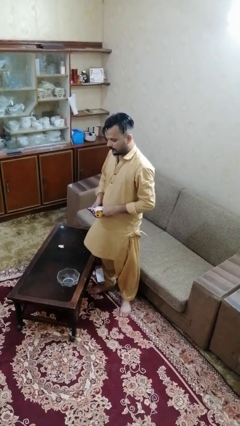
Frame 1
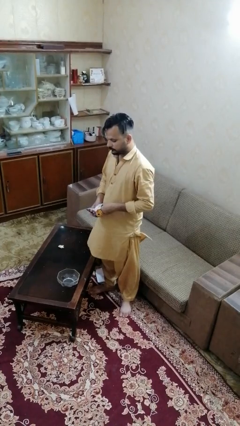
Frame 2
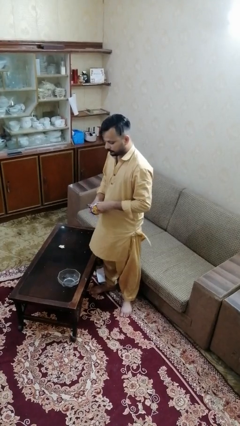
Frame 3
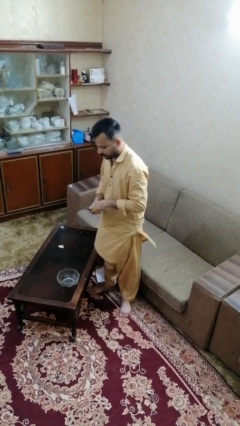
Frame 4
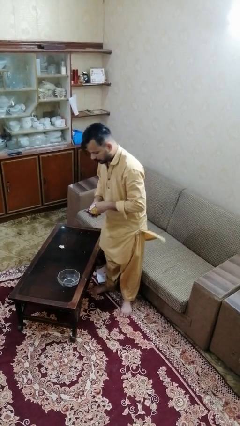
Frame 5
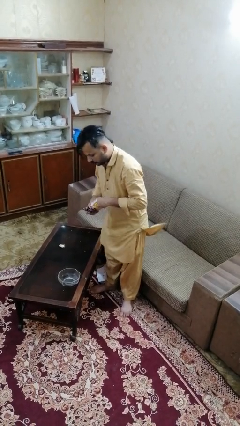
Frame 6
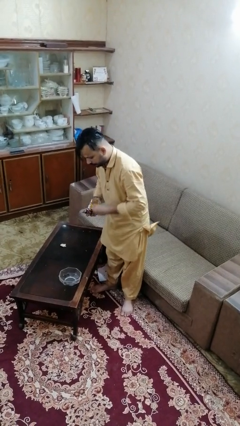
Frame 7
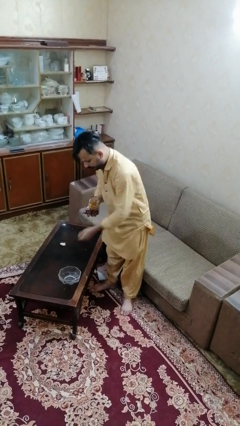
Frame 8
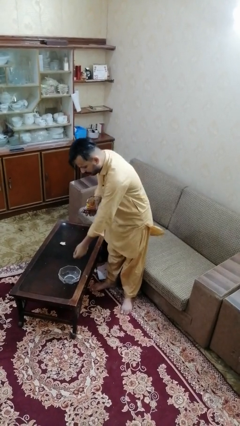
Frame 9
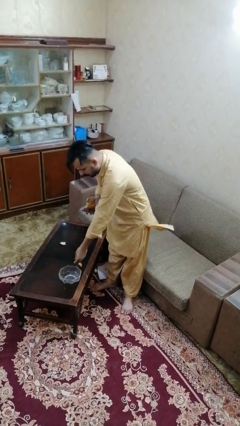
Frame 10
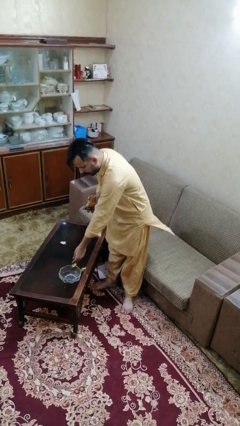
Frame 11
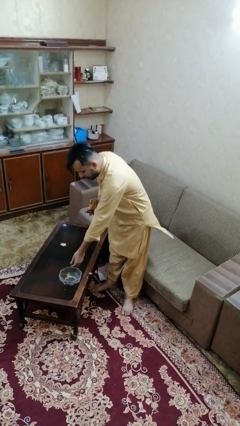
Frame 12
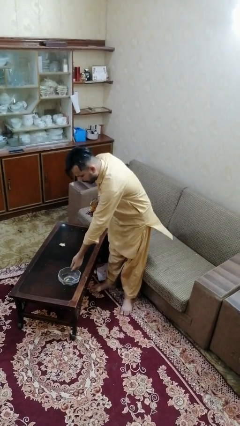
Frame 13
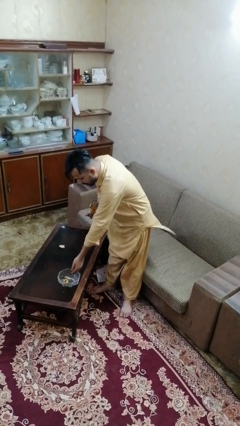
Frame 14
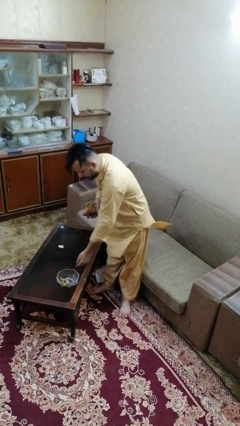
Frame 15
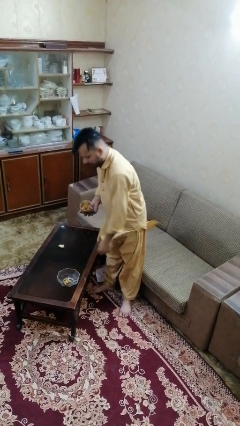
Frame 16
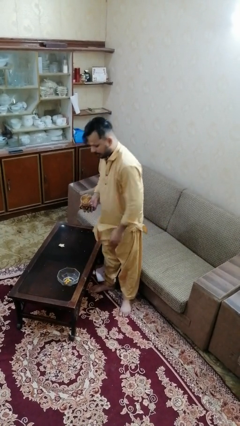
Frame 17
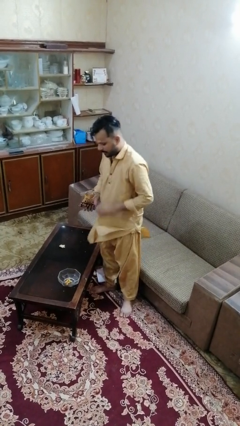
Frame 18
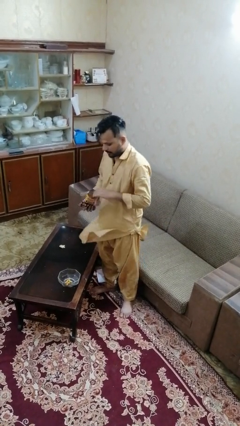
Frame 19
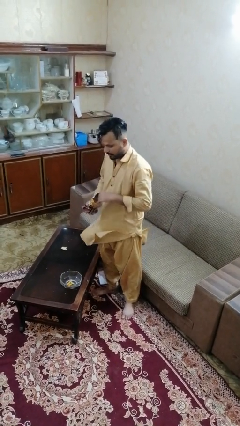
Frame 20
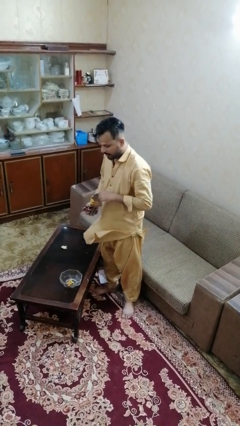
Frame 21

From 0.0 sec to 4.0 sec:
person pours into bowl

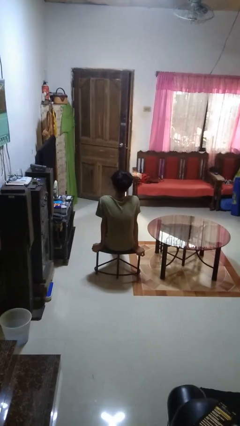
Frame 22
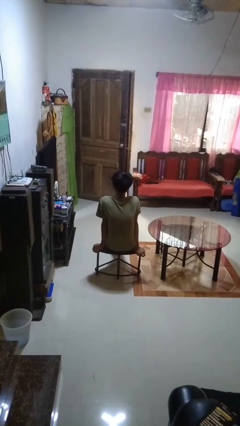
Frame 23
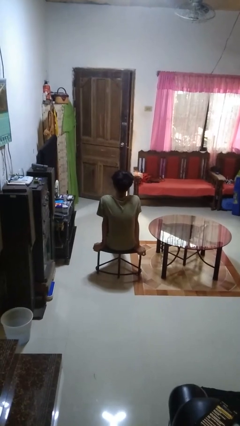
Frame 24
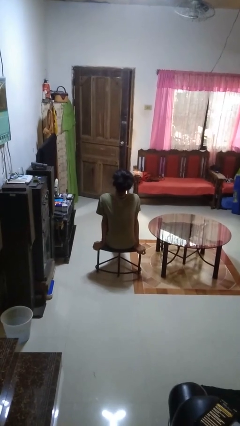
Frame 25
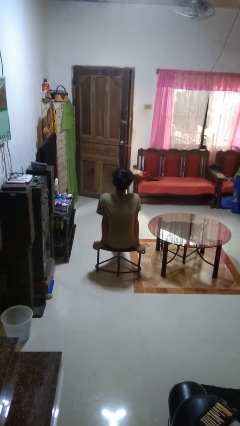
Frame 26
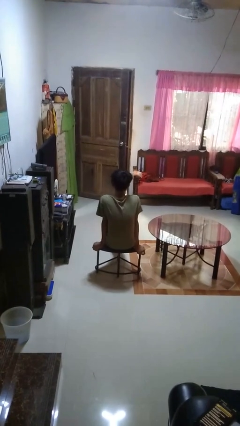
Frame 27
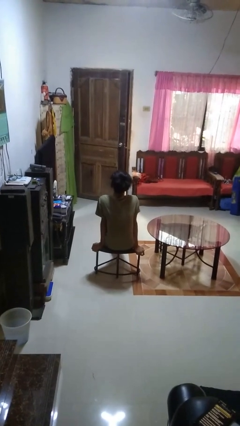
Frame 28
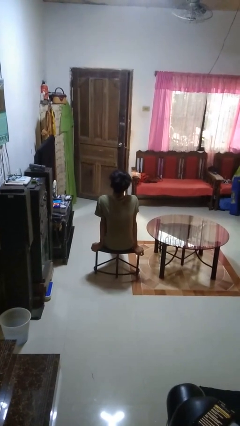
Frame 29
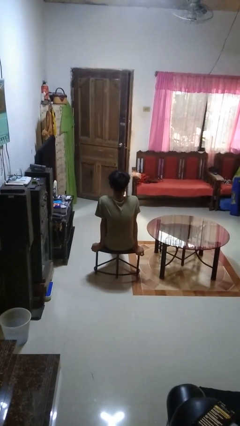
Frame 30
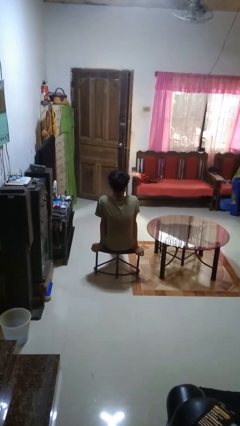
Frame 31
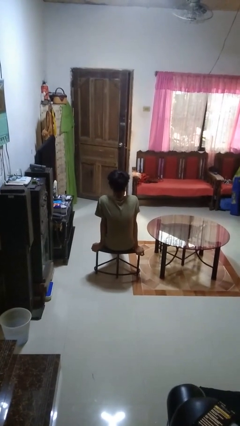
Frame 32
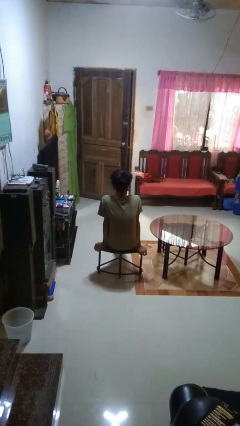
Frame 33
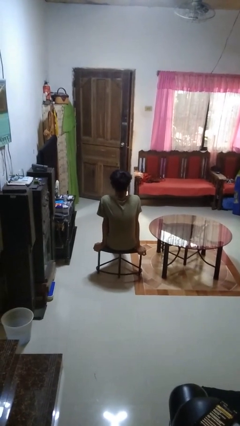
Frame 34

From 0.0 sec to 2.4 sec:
person nods head

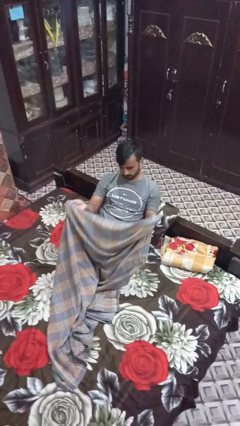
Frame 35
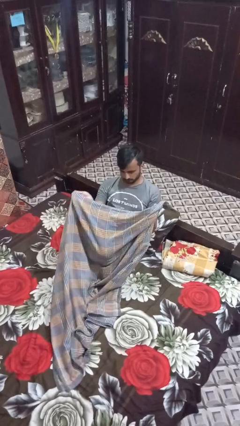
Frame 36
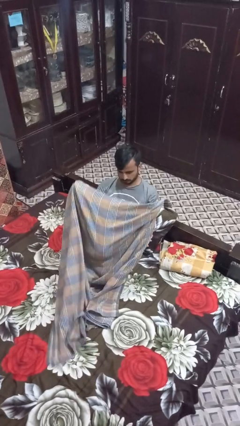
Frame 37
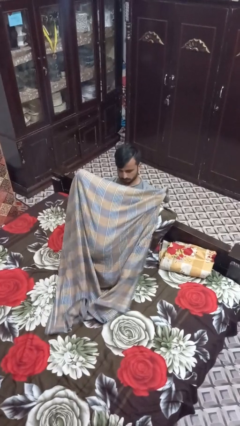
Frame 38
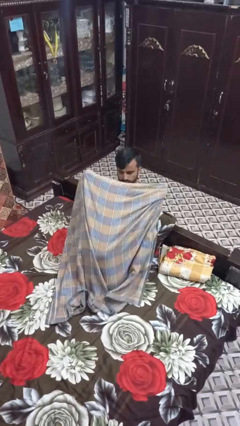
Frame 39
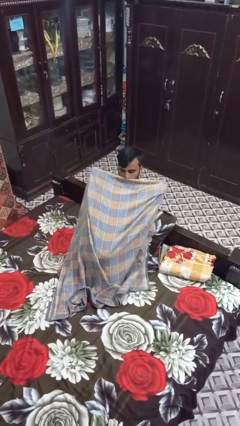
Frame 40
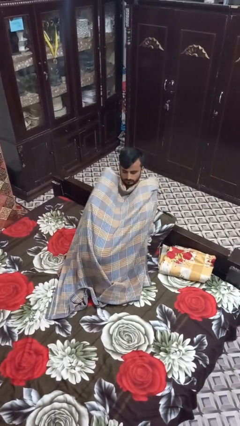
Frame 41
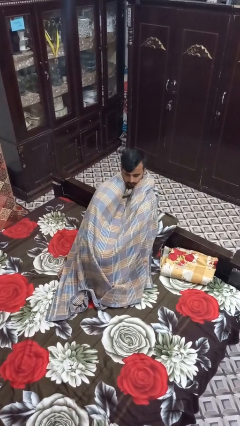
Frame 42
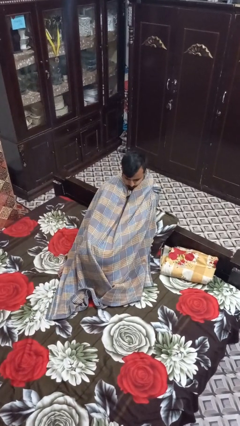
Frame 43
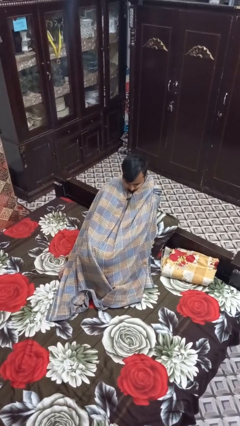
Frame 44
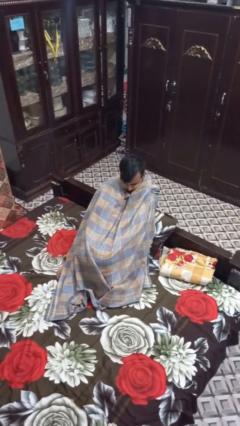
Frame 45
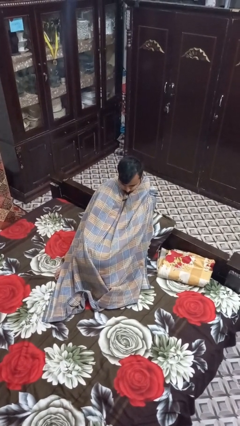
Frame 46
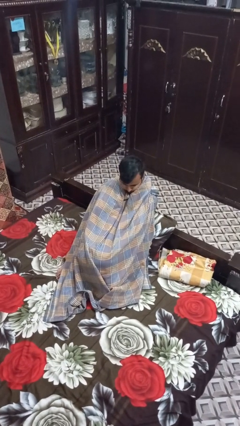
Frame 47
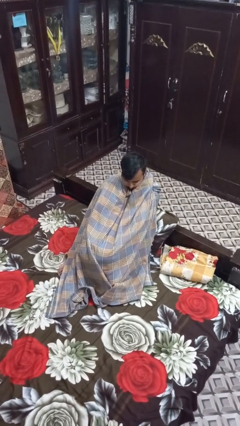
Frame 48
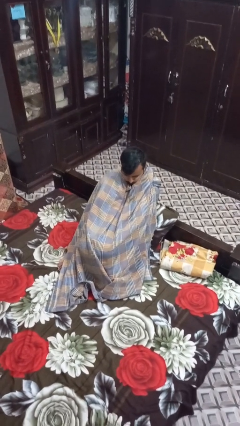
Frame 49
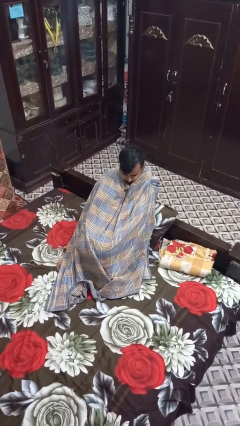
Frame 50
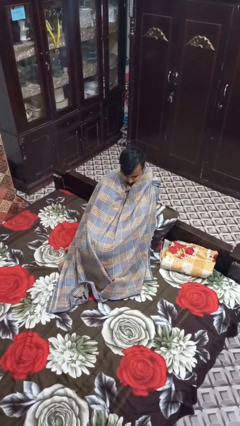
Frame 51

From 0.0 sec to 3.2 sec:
person covers with blanket

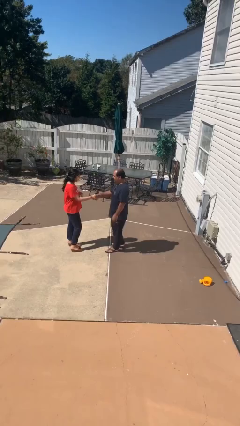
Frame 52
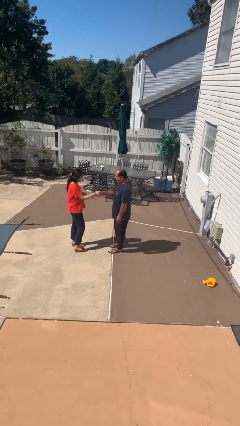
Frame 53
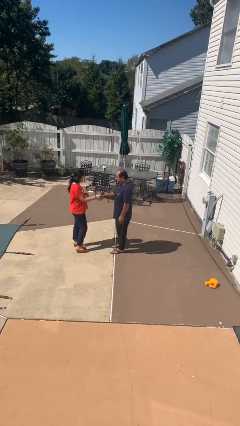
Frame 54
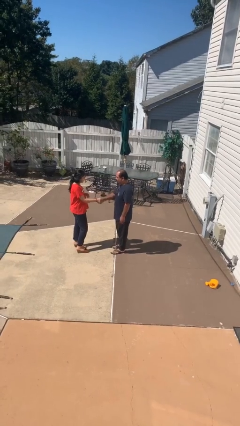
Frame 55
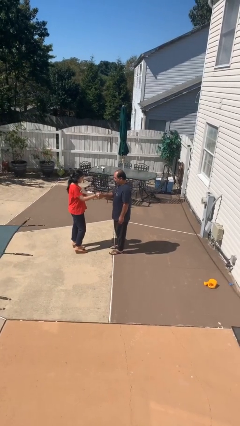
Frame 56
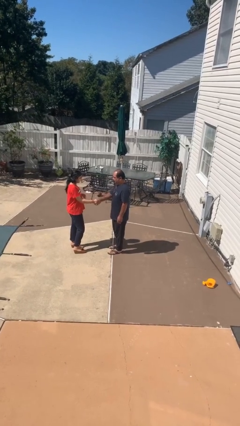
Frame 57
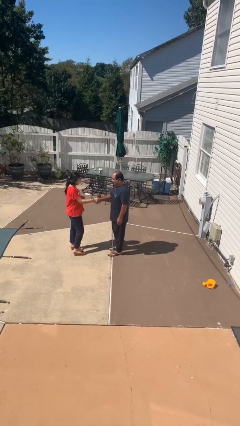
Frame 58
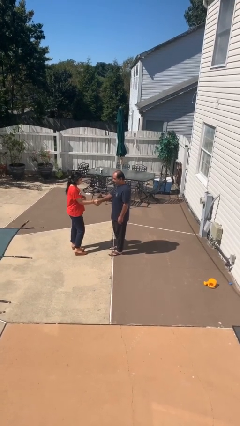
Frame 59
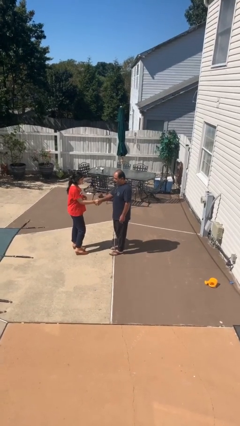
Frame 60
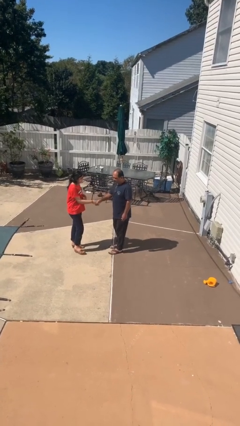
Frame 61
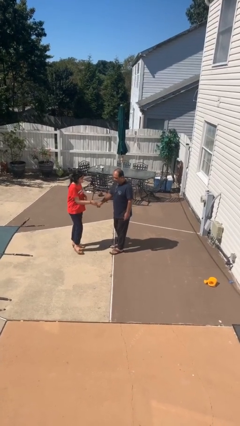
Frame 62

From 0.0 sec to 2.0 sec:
person shakes hand

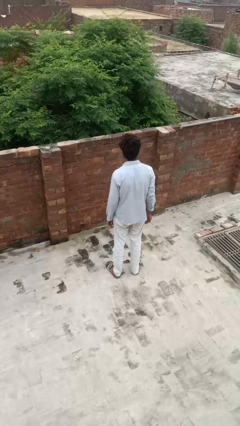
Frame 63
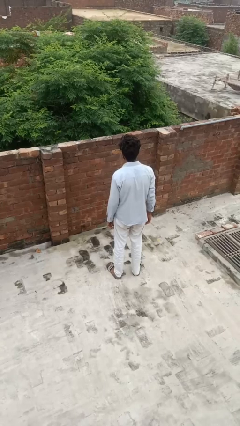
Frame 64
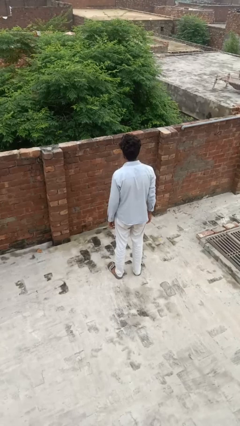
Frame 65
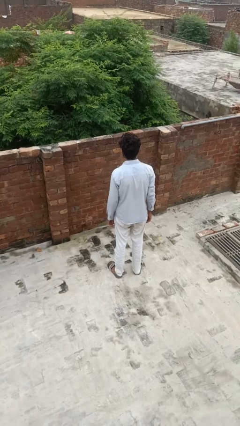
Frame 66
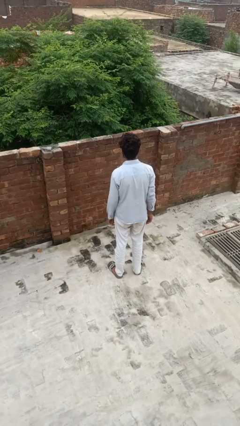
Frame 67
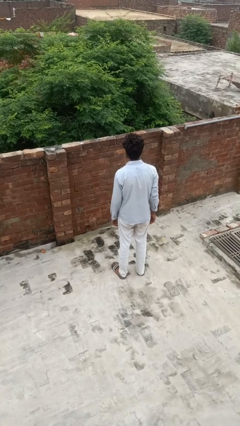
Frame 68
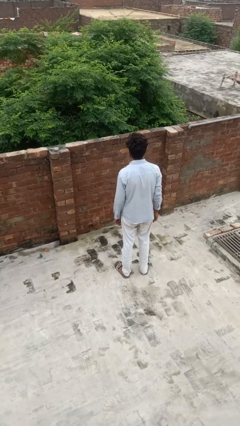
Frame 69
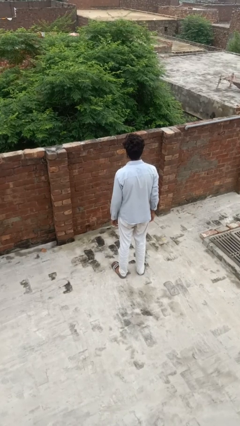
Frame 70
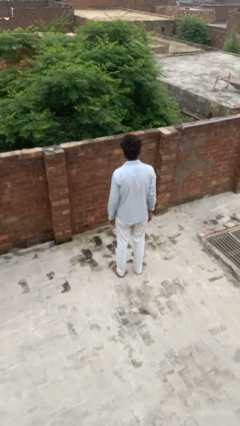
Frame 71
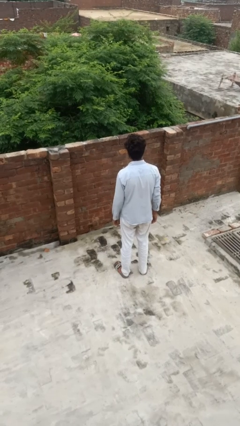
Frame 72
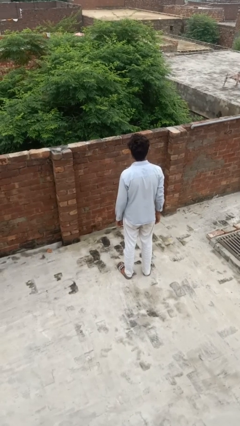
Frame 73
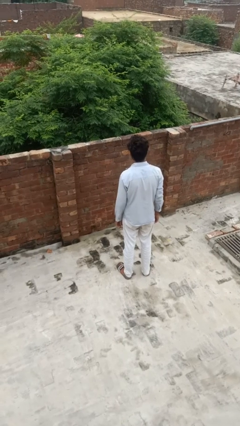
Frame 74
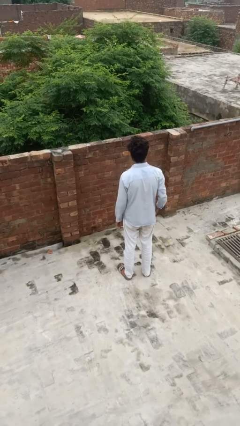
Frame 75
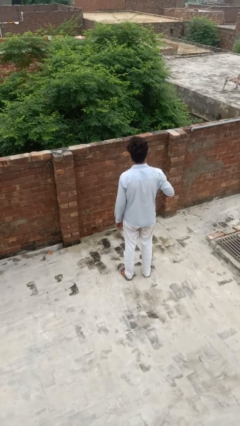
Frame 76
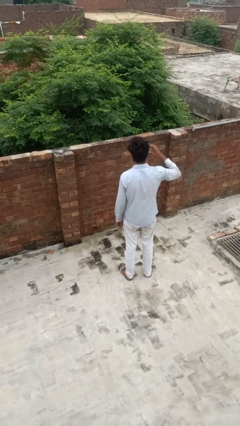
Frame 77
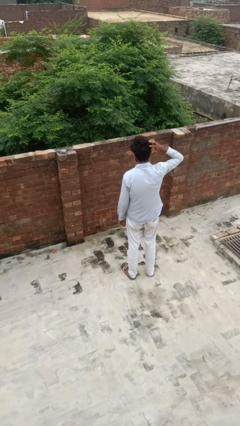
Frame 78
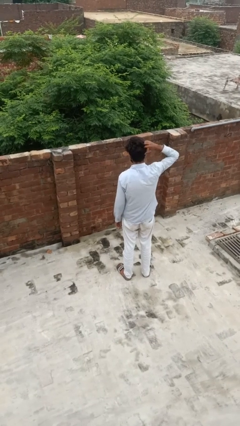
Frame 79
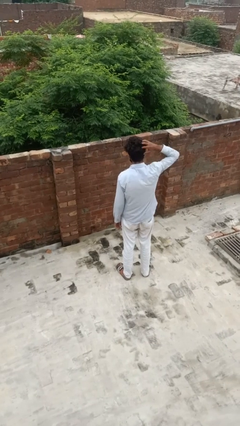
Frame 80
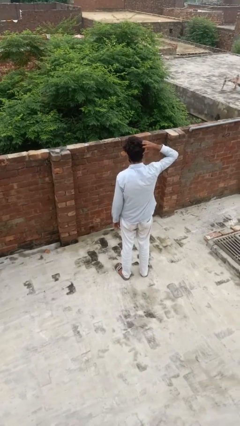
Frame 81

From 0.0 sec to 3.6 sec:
person scratches face

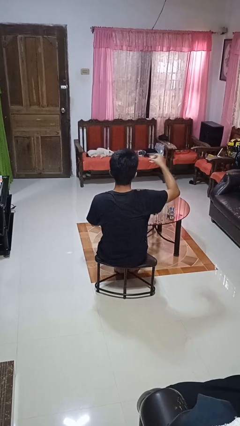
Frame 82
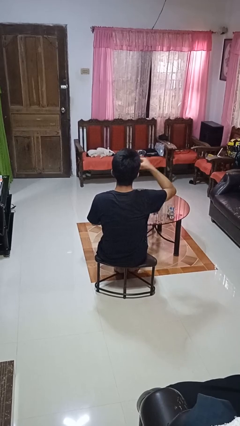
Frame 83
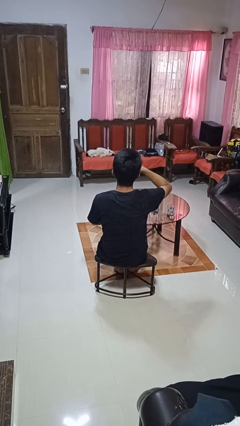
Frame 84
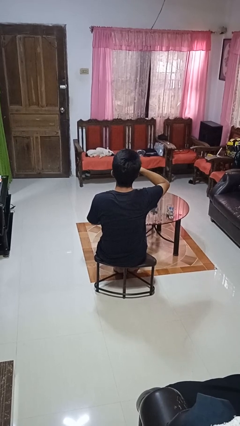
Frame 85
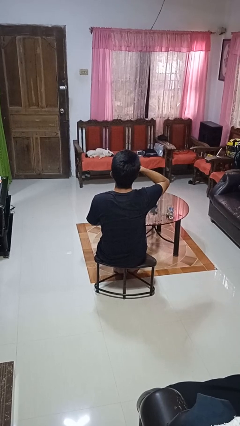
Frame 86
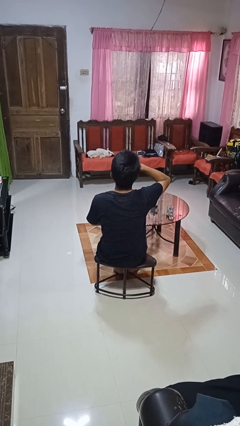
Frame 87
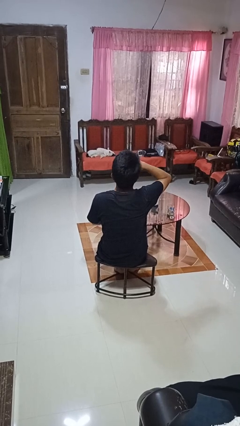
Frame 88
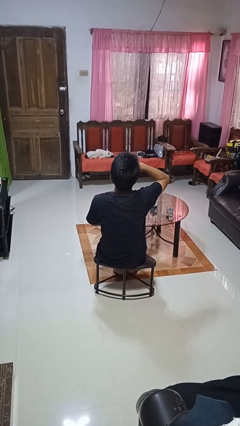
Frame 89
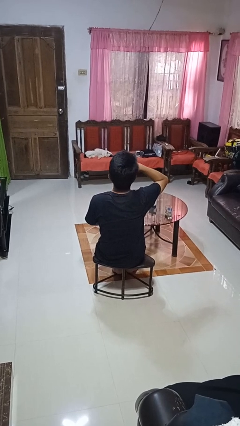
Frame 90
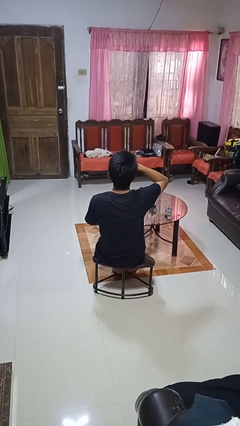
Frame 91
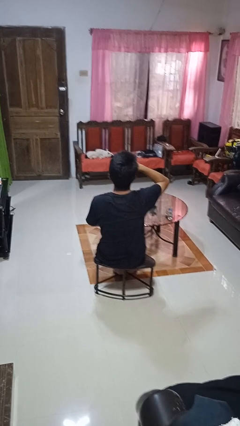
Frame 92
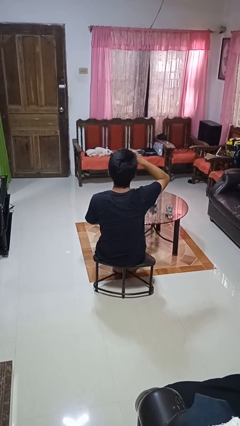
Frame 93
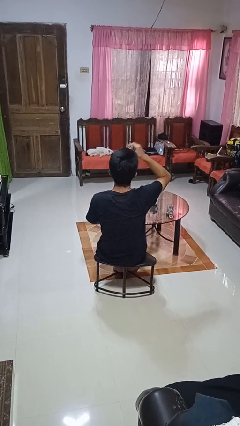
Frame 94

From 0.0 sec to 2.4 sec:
person drinks from shotglass
